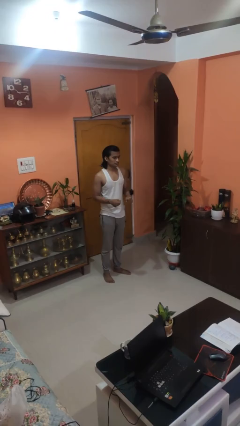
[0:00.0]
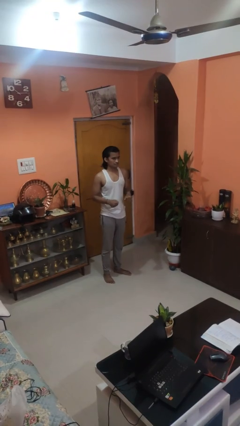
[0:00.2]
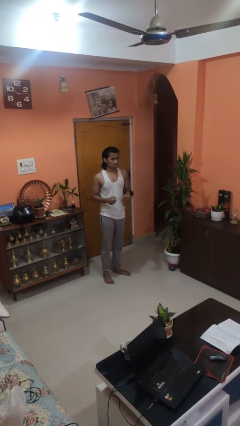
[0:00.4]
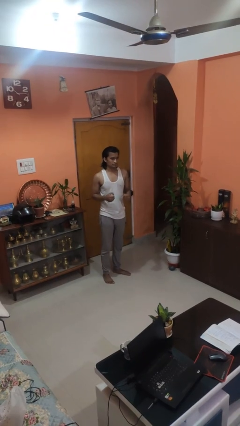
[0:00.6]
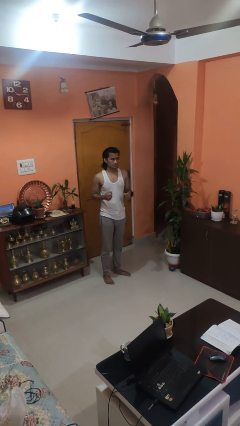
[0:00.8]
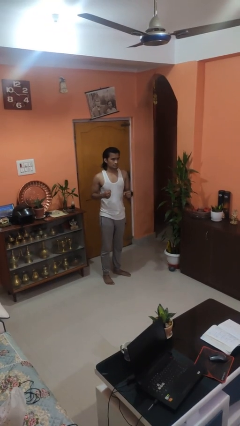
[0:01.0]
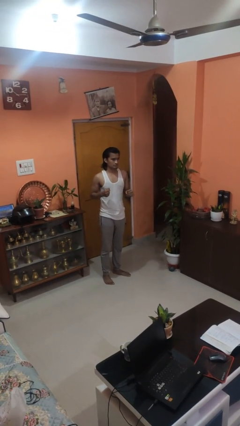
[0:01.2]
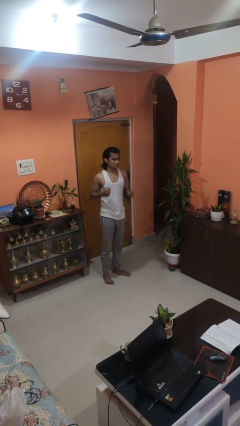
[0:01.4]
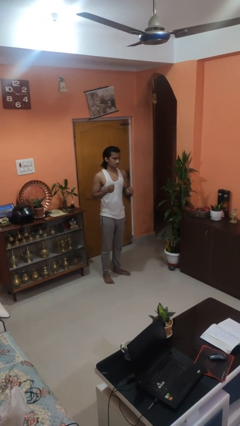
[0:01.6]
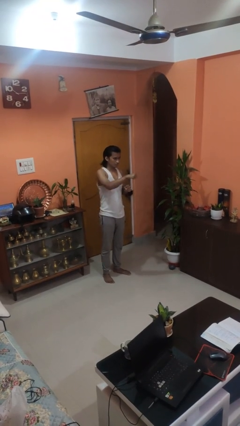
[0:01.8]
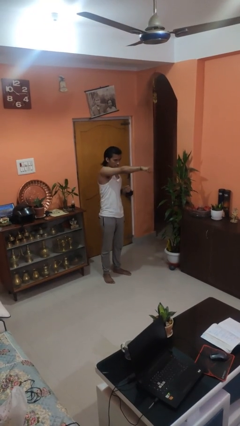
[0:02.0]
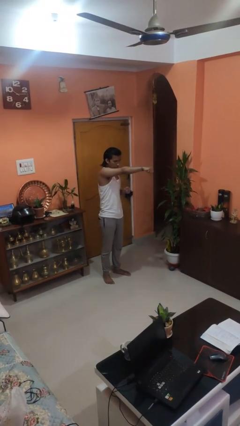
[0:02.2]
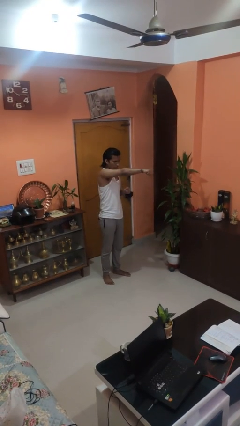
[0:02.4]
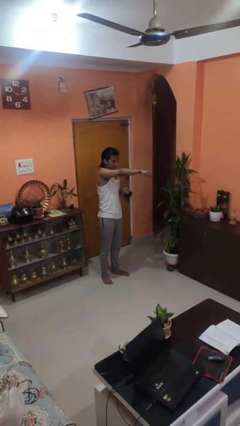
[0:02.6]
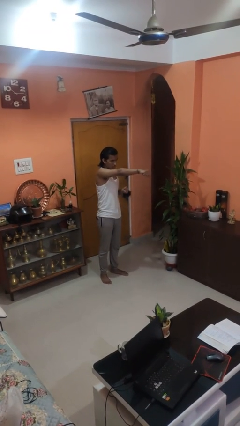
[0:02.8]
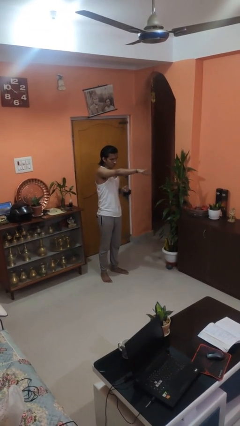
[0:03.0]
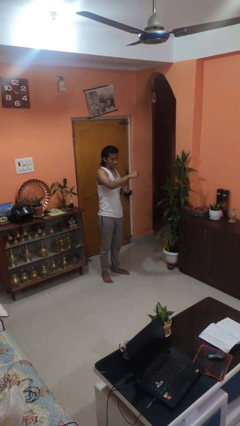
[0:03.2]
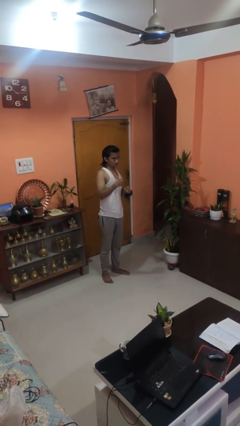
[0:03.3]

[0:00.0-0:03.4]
person punches

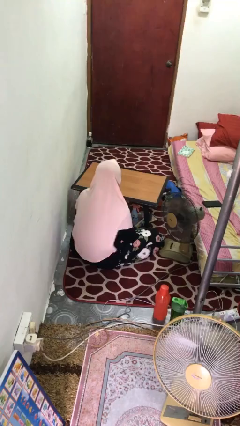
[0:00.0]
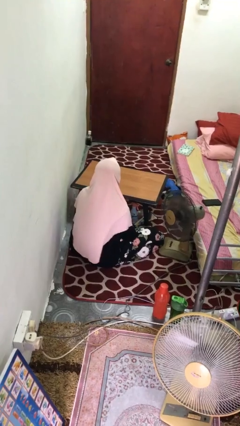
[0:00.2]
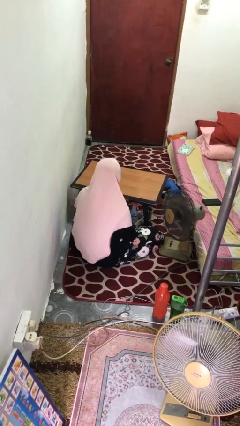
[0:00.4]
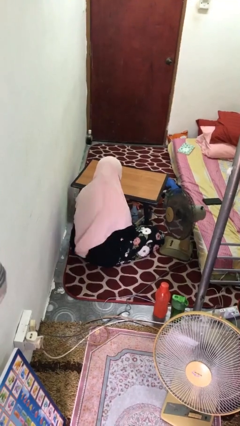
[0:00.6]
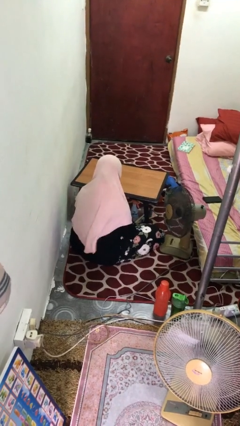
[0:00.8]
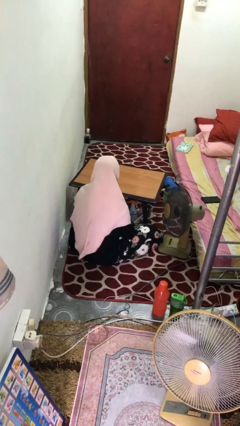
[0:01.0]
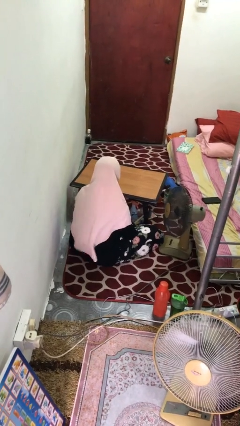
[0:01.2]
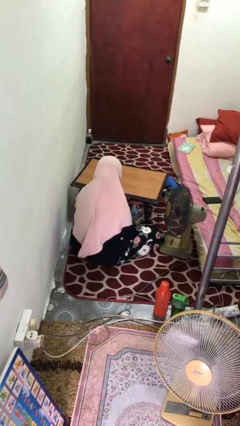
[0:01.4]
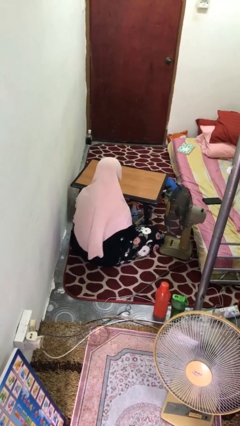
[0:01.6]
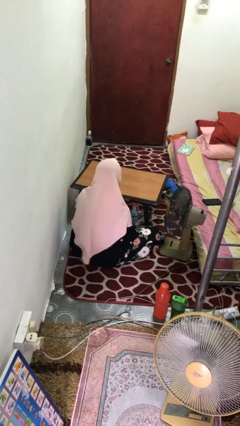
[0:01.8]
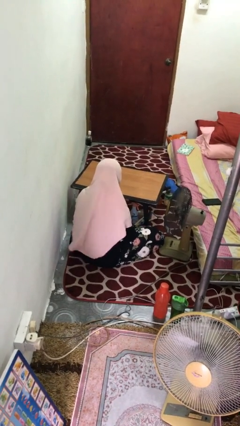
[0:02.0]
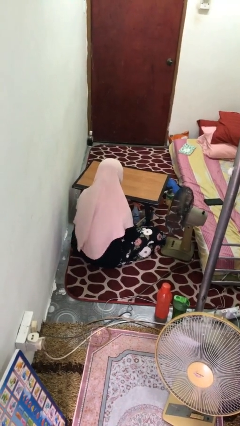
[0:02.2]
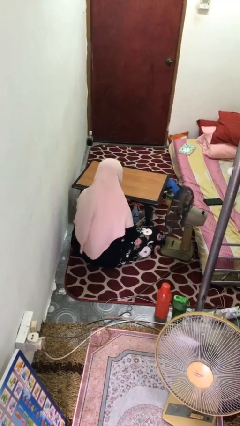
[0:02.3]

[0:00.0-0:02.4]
person nods head

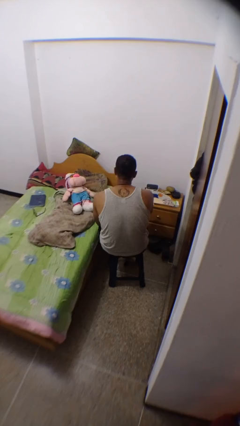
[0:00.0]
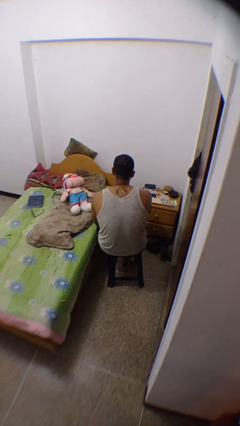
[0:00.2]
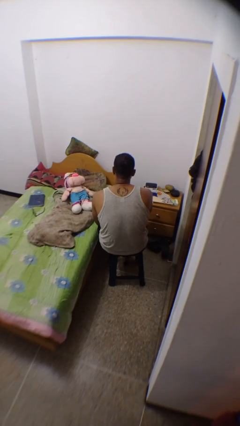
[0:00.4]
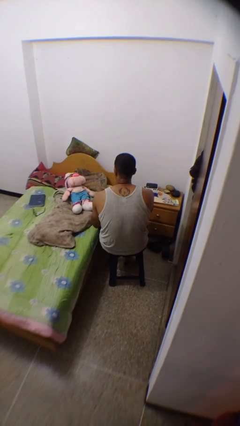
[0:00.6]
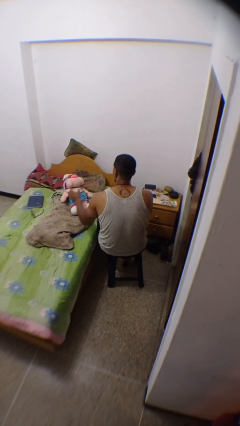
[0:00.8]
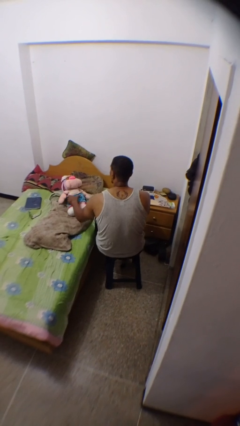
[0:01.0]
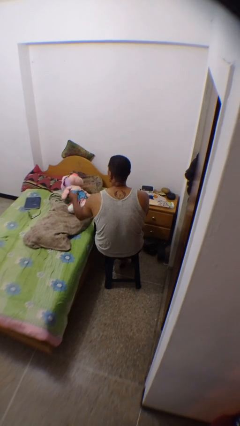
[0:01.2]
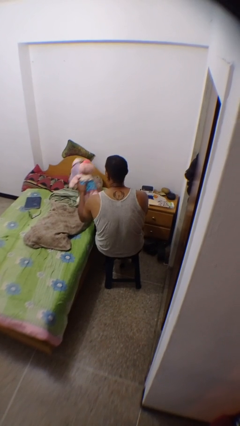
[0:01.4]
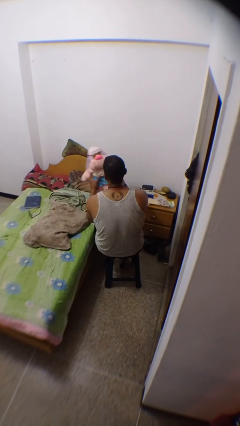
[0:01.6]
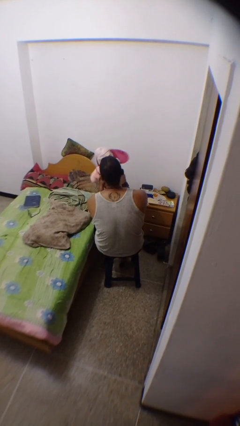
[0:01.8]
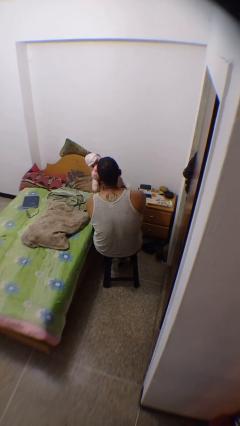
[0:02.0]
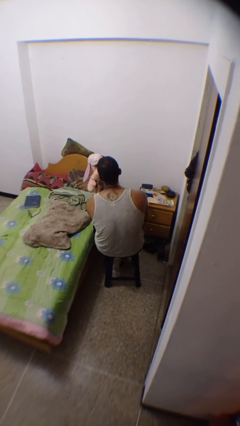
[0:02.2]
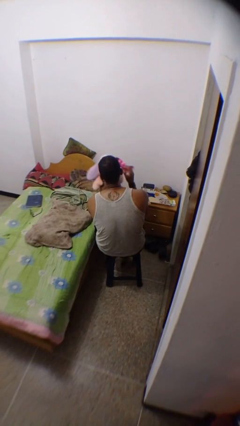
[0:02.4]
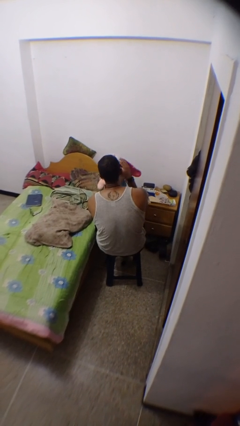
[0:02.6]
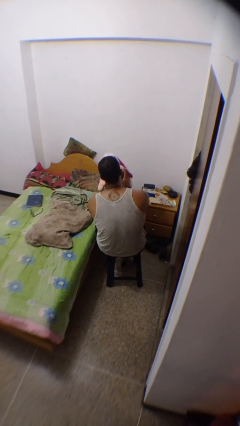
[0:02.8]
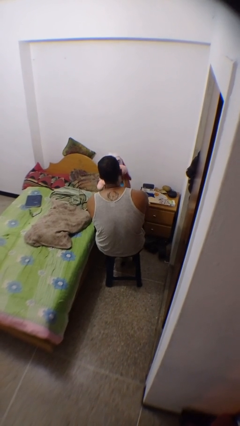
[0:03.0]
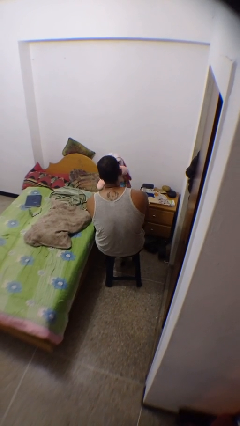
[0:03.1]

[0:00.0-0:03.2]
person picks up object from bed

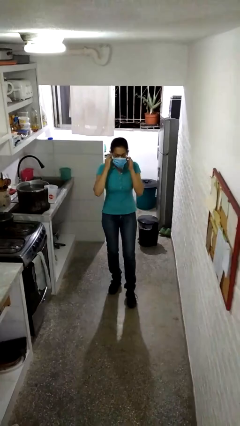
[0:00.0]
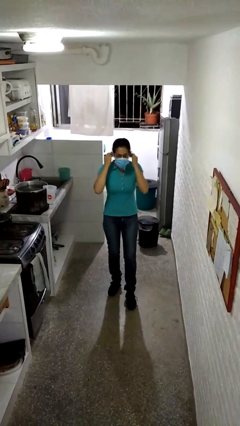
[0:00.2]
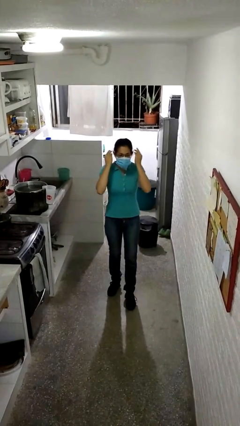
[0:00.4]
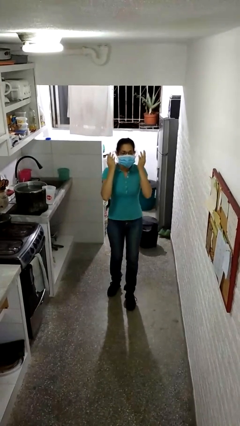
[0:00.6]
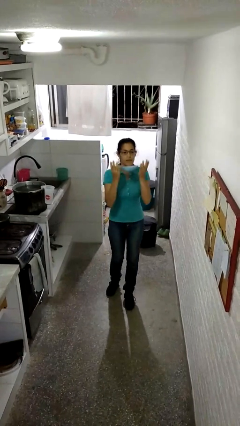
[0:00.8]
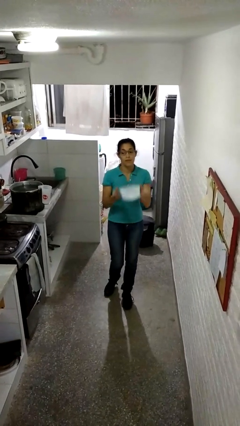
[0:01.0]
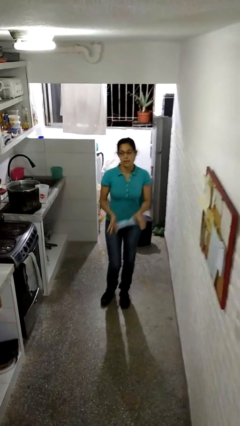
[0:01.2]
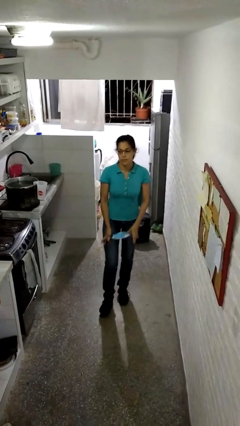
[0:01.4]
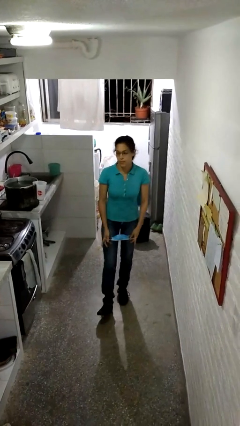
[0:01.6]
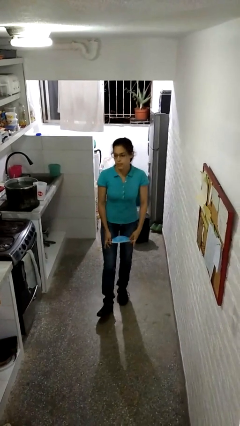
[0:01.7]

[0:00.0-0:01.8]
person takes off facemask

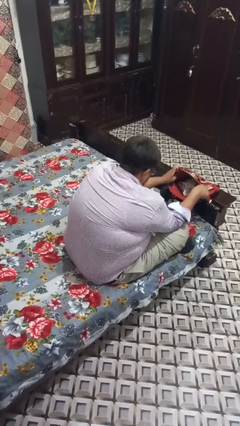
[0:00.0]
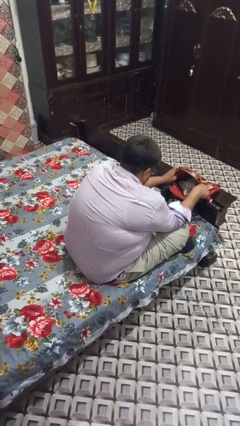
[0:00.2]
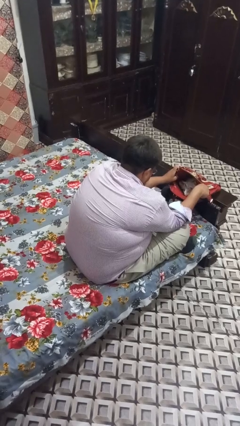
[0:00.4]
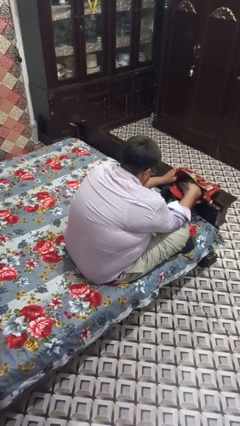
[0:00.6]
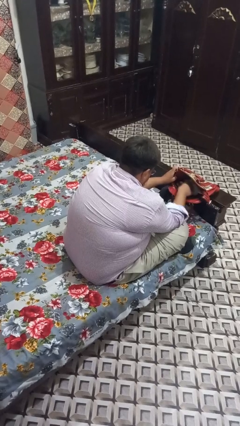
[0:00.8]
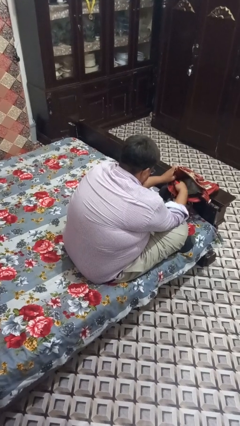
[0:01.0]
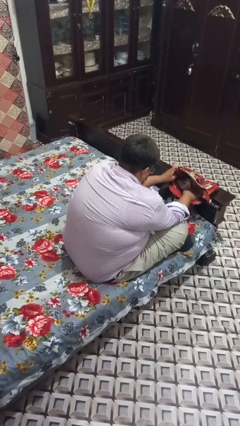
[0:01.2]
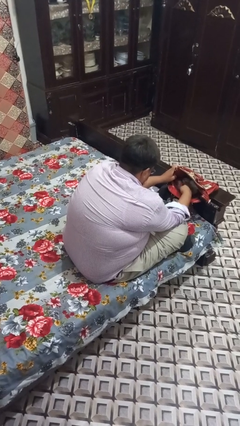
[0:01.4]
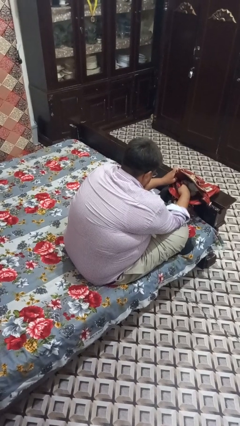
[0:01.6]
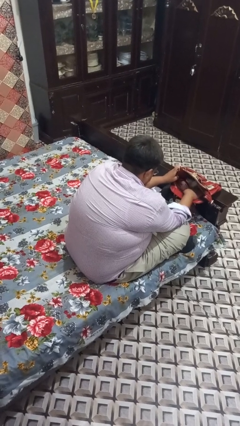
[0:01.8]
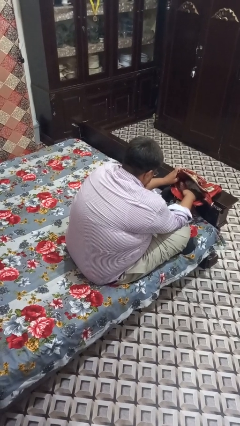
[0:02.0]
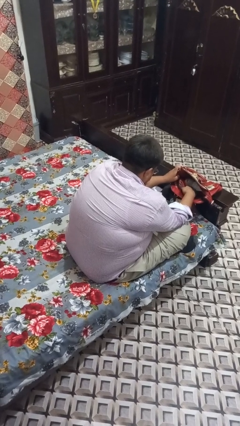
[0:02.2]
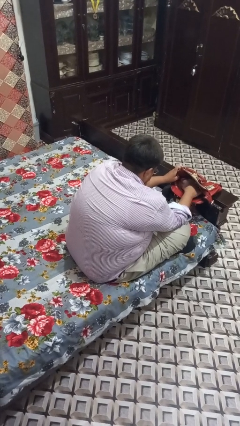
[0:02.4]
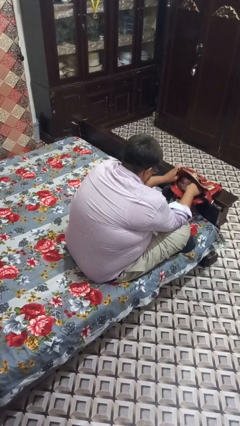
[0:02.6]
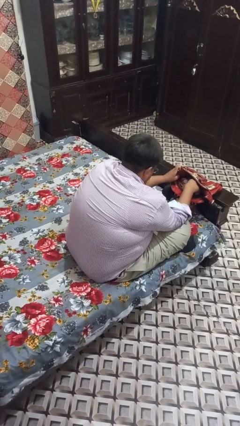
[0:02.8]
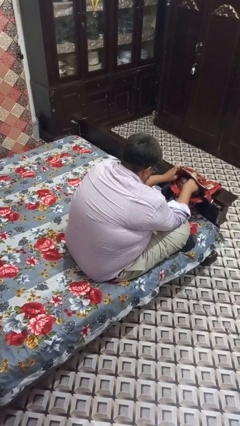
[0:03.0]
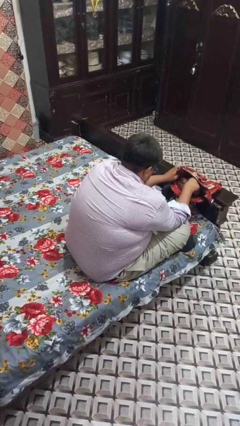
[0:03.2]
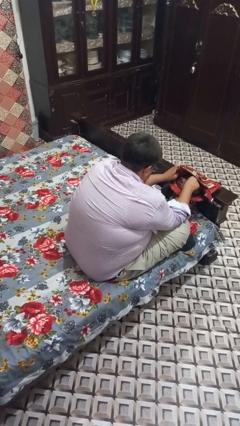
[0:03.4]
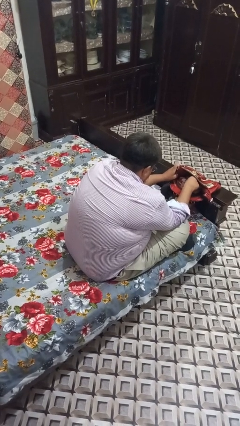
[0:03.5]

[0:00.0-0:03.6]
person searches in purse

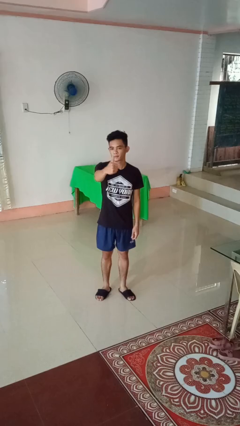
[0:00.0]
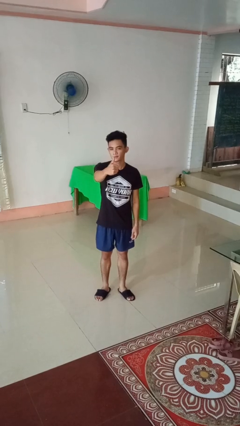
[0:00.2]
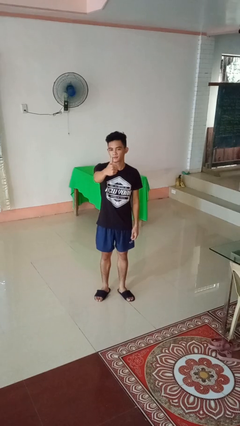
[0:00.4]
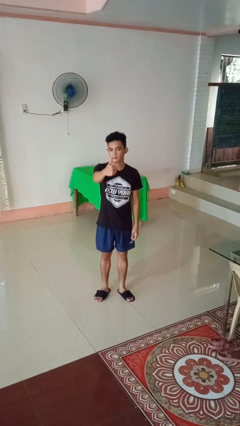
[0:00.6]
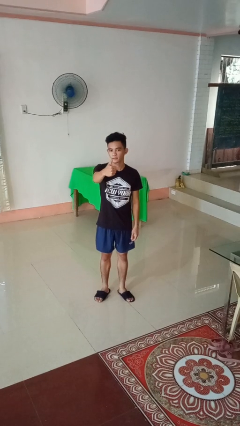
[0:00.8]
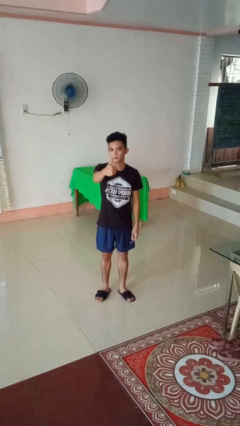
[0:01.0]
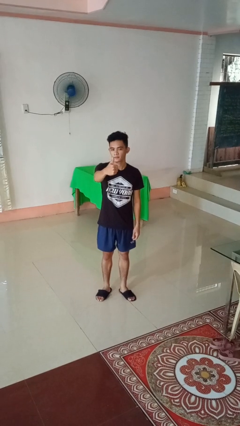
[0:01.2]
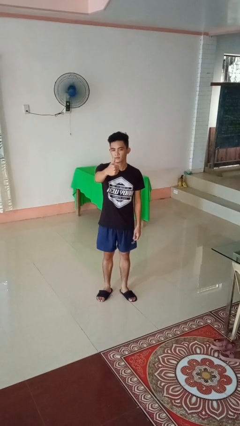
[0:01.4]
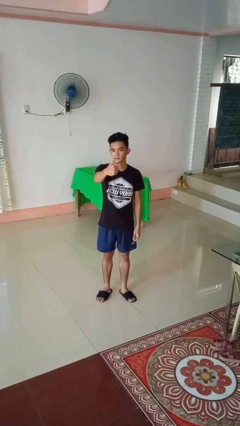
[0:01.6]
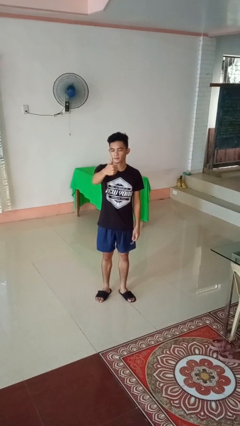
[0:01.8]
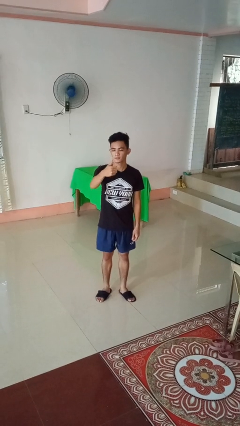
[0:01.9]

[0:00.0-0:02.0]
person gestures thumbs up

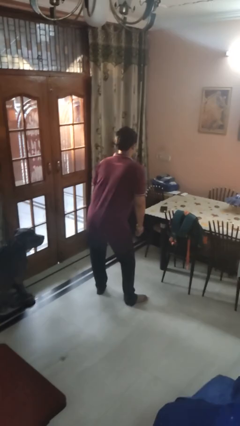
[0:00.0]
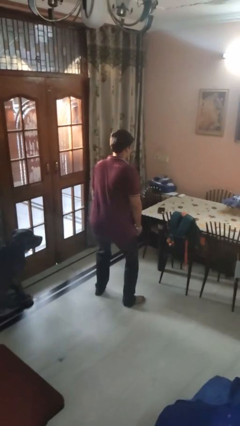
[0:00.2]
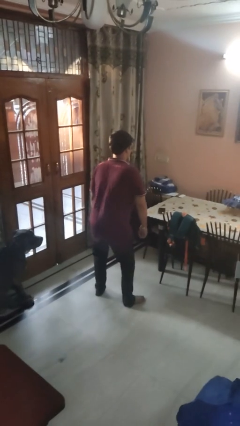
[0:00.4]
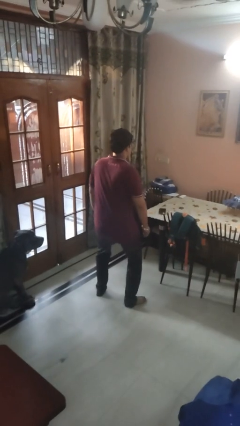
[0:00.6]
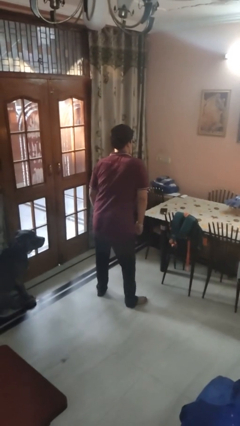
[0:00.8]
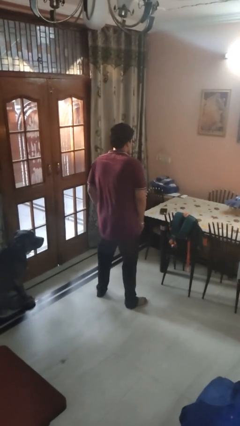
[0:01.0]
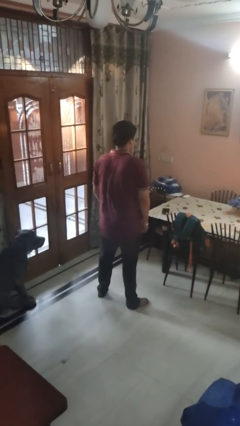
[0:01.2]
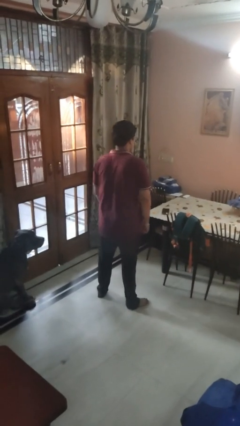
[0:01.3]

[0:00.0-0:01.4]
person wiggles hips
